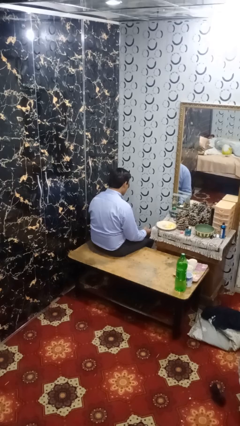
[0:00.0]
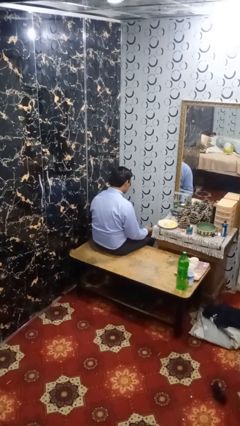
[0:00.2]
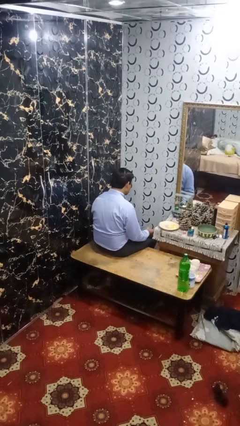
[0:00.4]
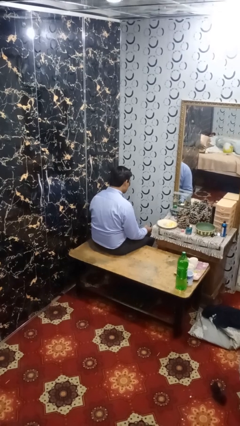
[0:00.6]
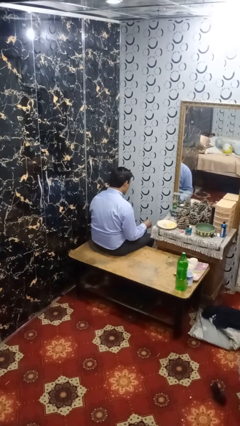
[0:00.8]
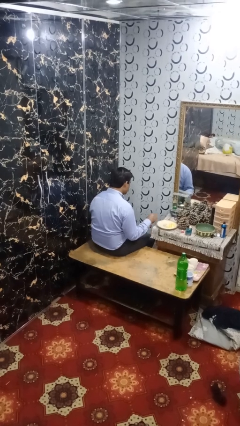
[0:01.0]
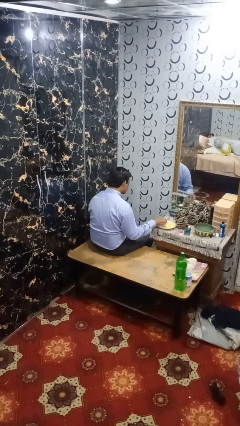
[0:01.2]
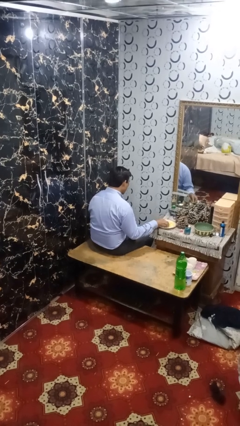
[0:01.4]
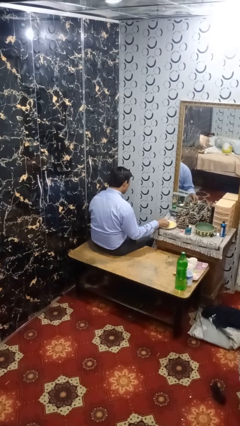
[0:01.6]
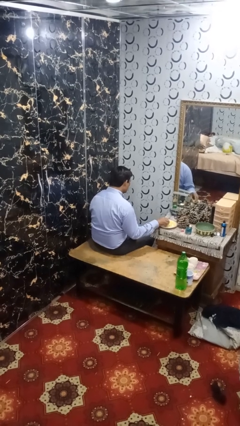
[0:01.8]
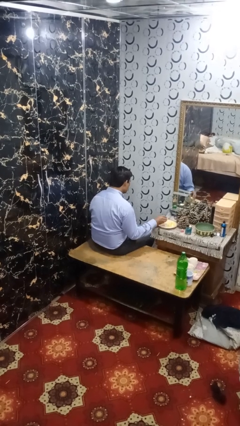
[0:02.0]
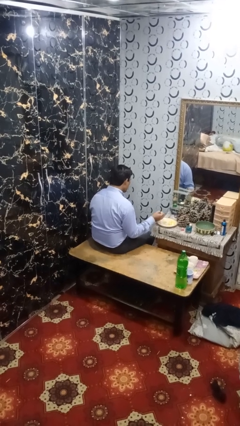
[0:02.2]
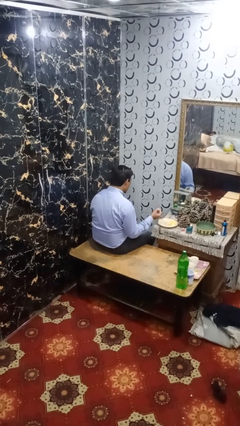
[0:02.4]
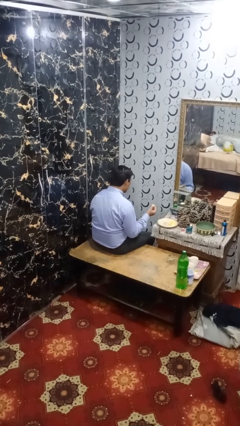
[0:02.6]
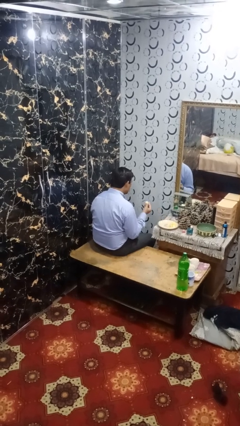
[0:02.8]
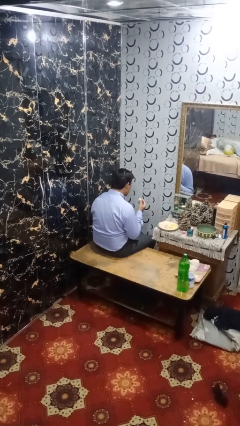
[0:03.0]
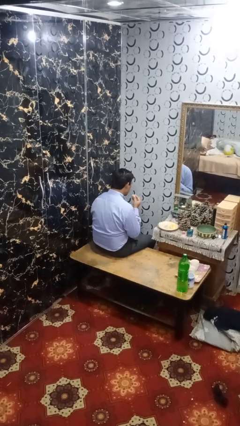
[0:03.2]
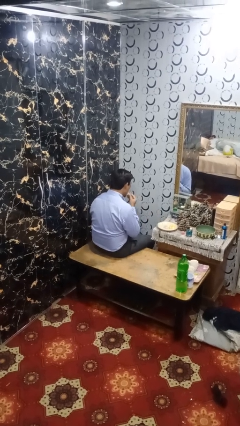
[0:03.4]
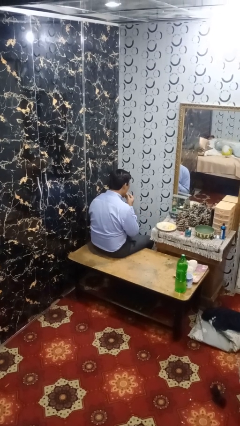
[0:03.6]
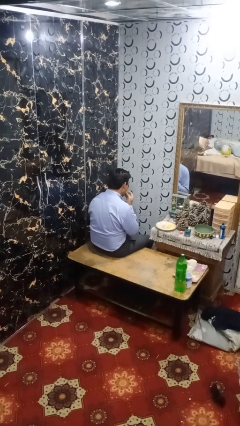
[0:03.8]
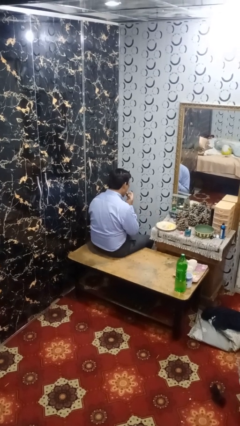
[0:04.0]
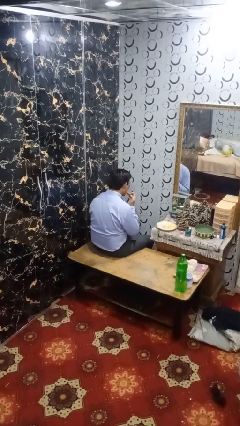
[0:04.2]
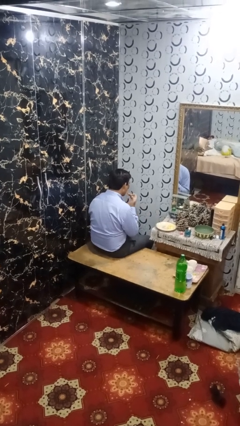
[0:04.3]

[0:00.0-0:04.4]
person eats with hands

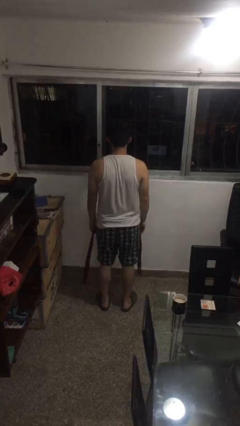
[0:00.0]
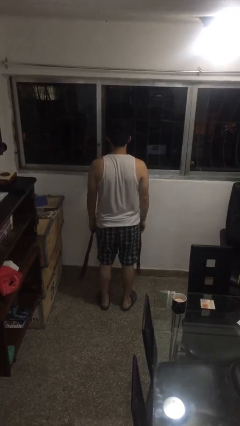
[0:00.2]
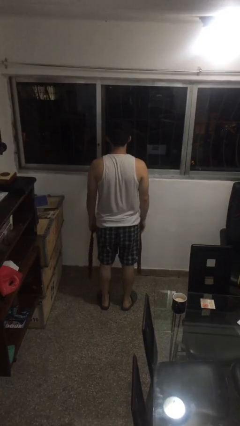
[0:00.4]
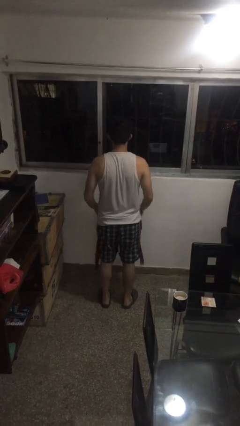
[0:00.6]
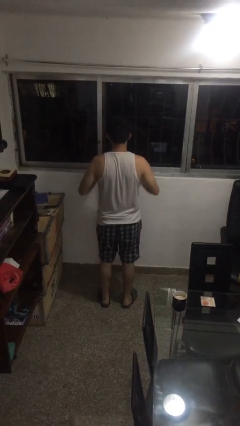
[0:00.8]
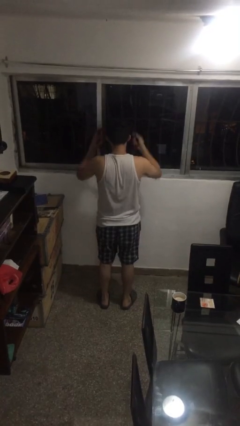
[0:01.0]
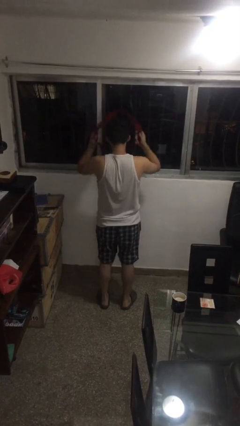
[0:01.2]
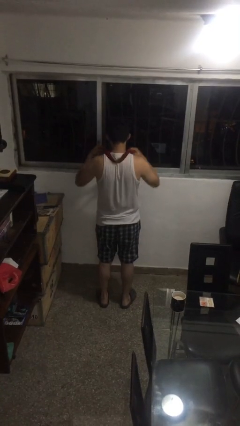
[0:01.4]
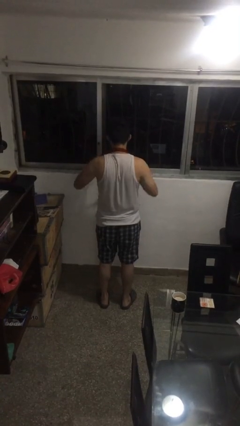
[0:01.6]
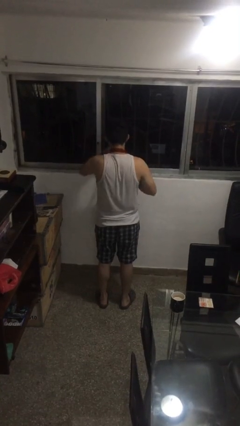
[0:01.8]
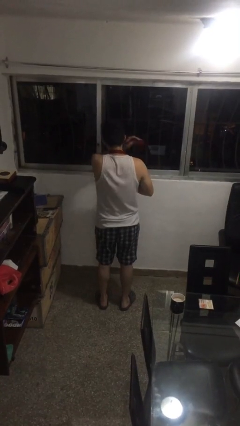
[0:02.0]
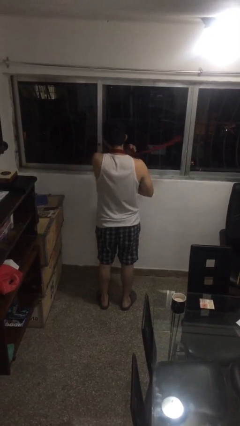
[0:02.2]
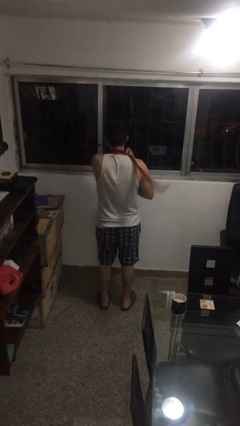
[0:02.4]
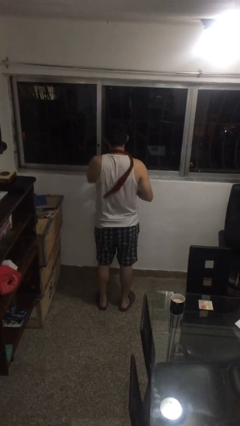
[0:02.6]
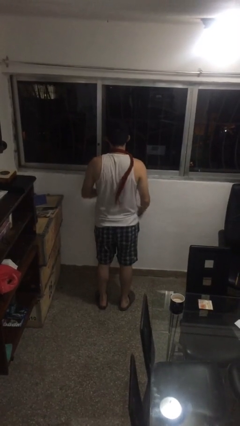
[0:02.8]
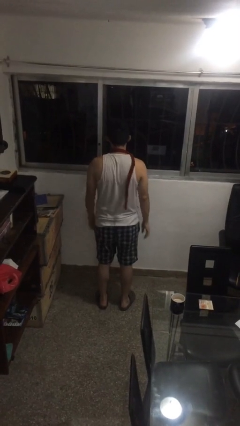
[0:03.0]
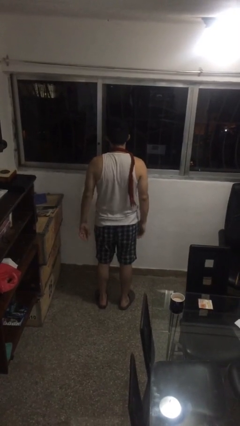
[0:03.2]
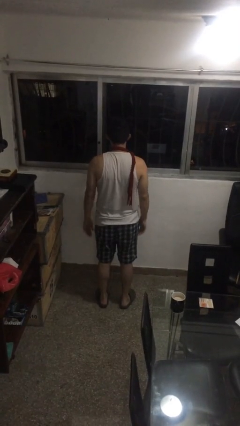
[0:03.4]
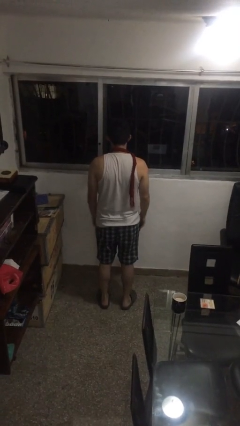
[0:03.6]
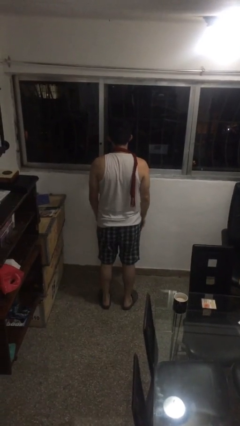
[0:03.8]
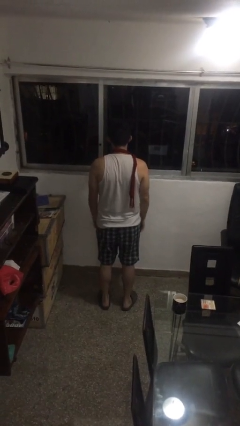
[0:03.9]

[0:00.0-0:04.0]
person puts on scarf

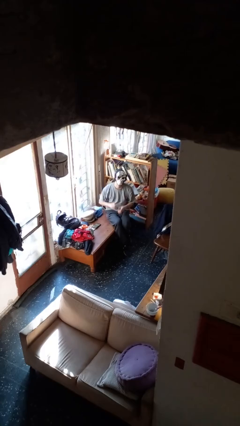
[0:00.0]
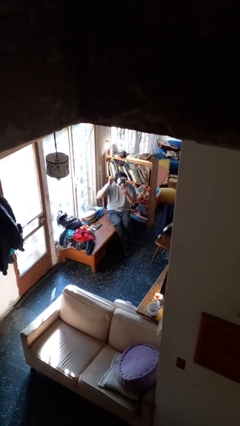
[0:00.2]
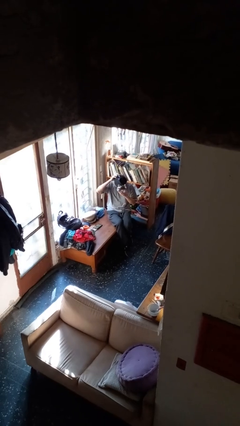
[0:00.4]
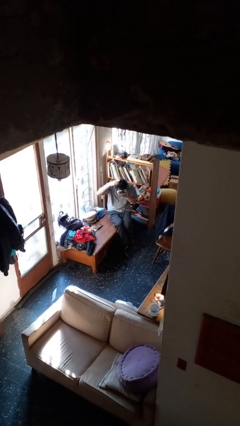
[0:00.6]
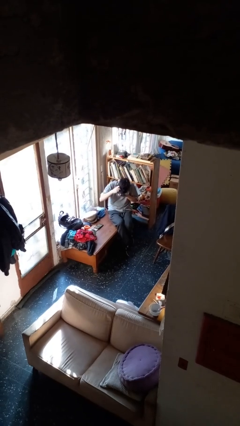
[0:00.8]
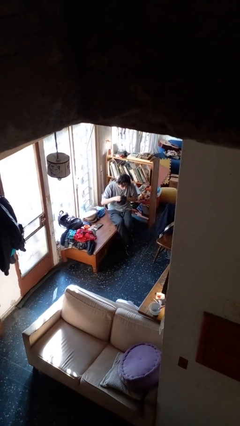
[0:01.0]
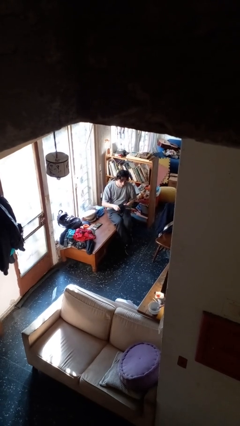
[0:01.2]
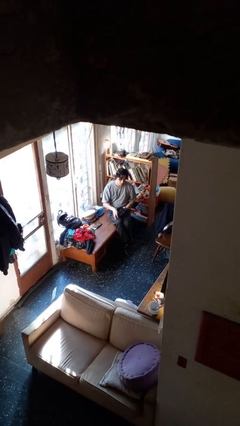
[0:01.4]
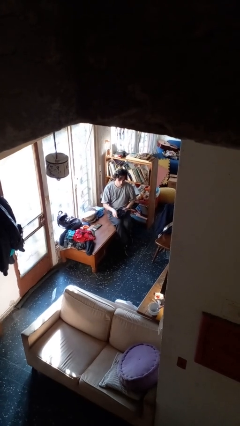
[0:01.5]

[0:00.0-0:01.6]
person takes off facemask

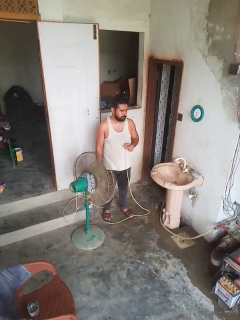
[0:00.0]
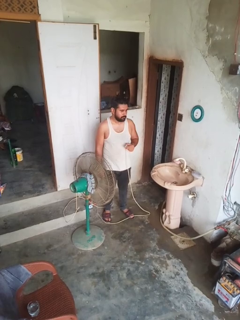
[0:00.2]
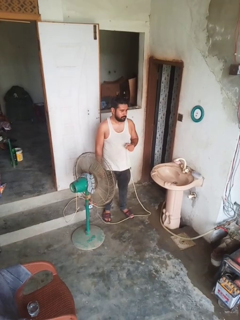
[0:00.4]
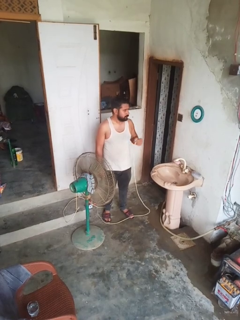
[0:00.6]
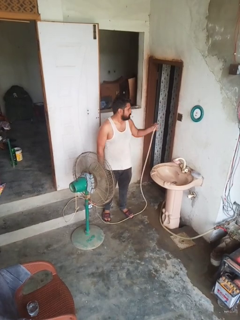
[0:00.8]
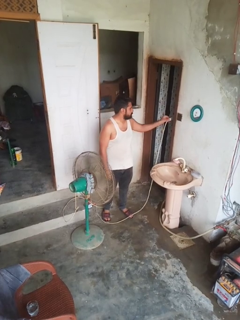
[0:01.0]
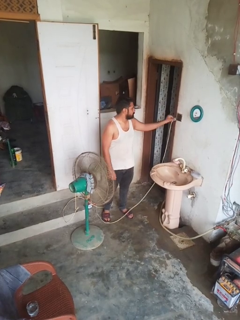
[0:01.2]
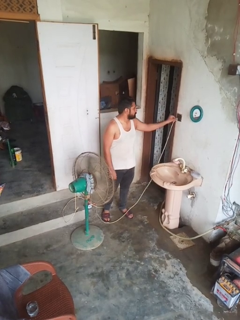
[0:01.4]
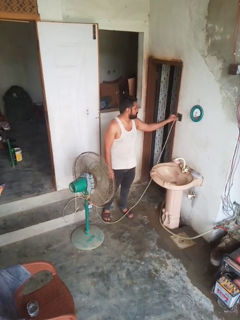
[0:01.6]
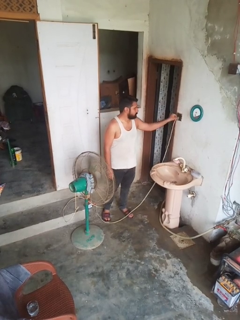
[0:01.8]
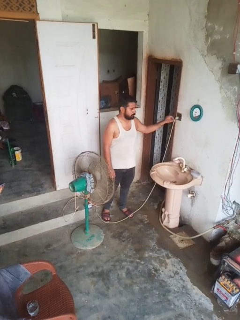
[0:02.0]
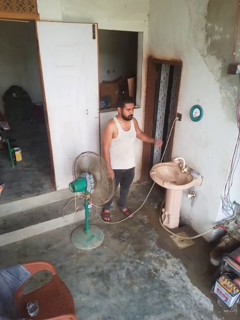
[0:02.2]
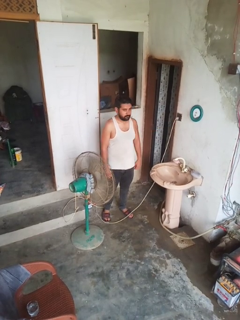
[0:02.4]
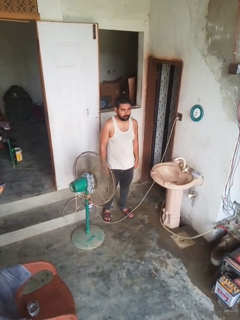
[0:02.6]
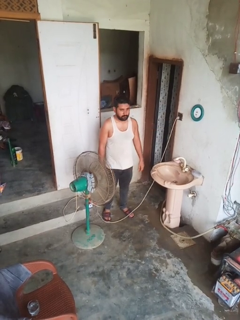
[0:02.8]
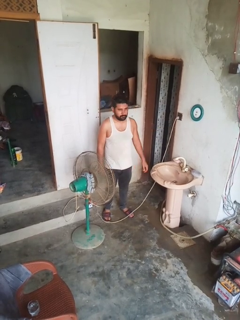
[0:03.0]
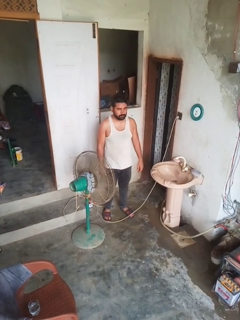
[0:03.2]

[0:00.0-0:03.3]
person turns on fan

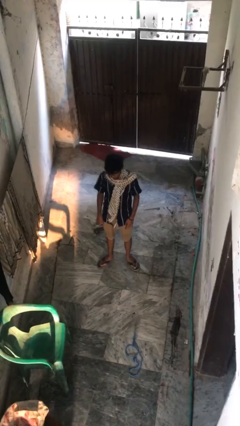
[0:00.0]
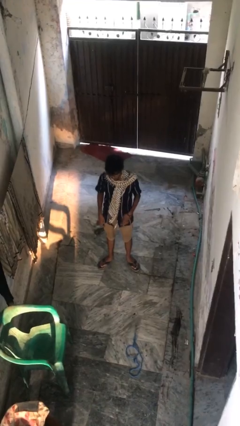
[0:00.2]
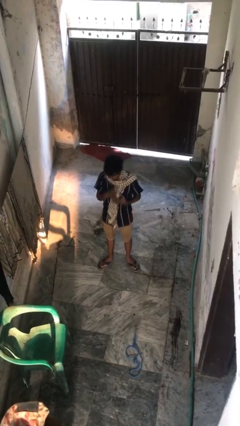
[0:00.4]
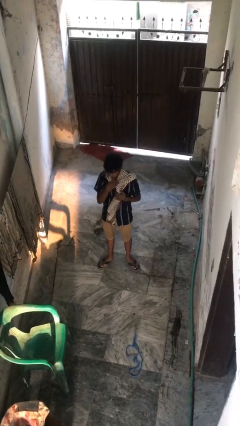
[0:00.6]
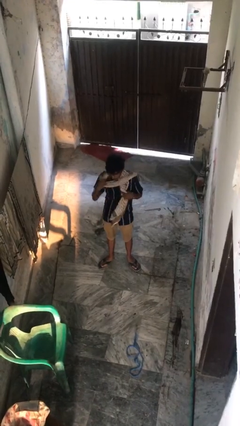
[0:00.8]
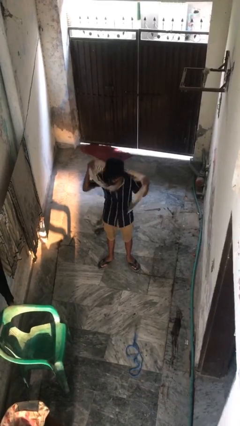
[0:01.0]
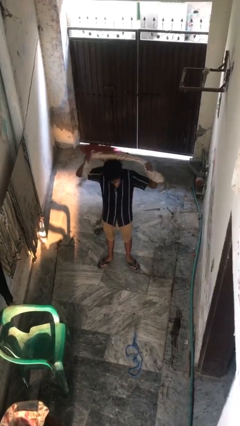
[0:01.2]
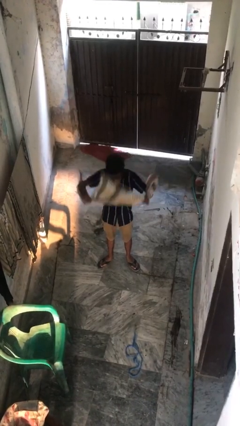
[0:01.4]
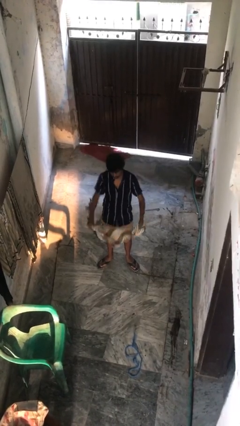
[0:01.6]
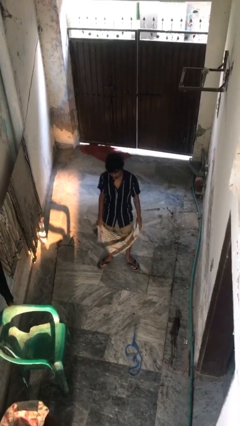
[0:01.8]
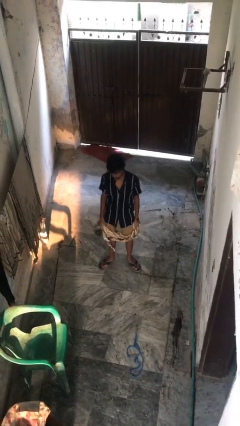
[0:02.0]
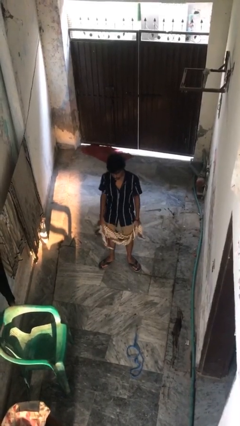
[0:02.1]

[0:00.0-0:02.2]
person takes off scarf

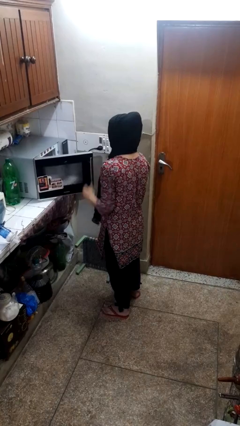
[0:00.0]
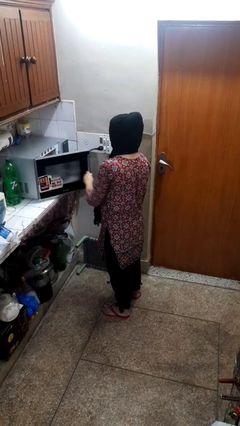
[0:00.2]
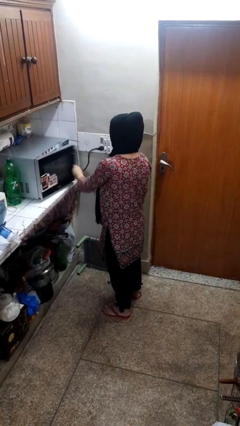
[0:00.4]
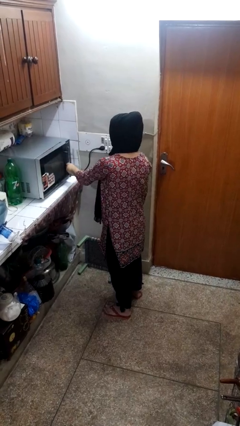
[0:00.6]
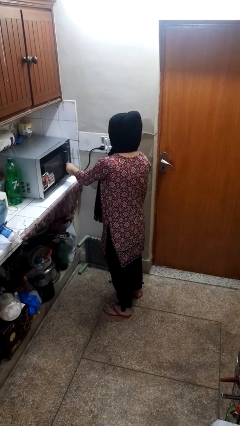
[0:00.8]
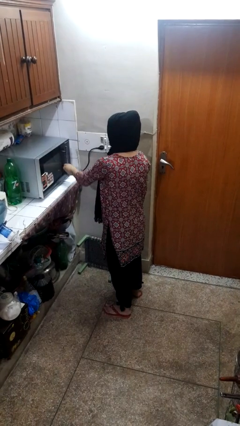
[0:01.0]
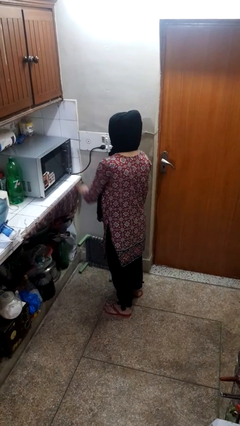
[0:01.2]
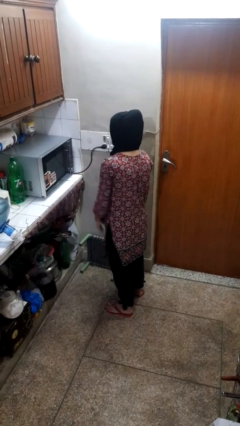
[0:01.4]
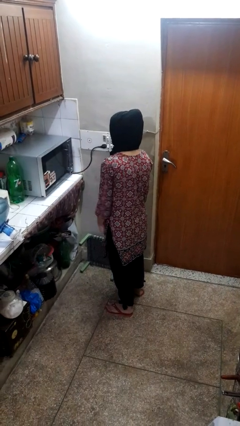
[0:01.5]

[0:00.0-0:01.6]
person closes oven door

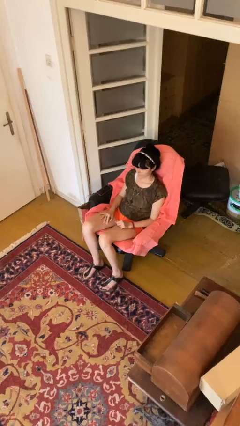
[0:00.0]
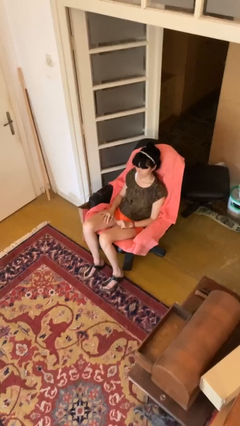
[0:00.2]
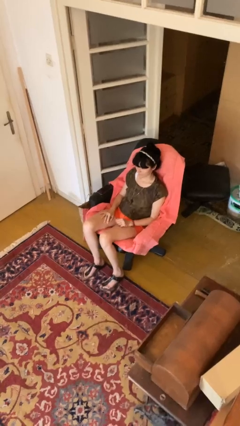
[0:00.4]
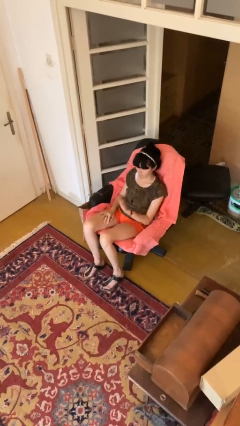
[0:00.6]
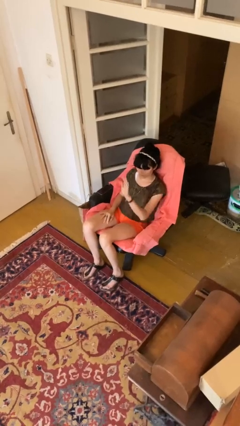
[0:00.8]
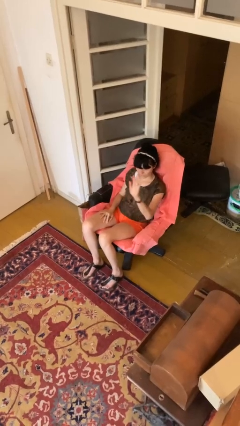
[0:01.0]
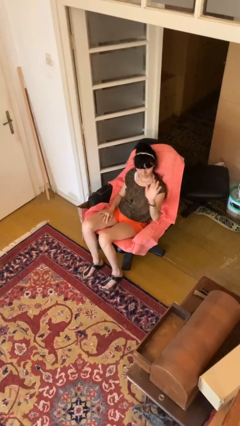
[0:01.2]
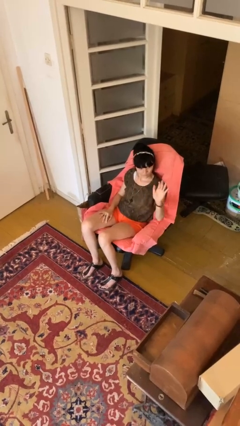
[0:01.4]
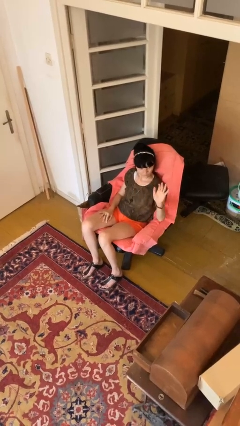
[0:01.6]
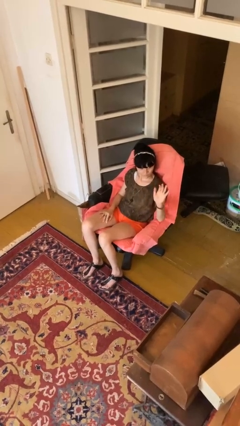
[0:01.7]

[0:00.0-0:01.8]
person gestures swipe left
